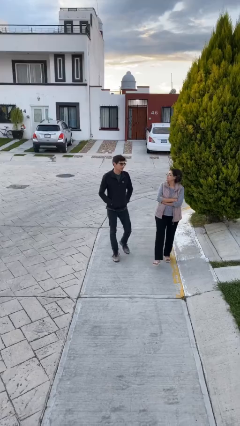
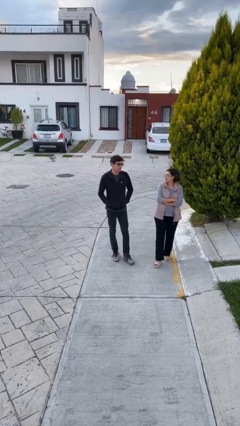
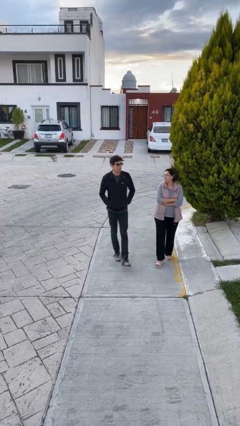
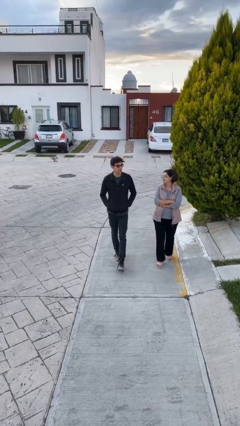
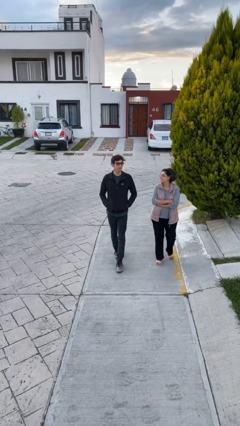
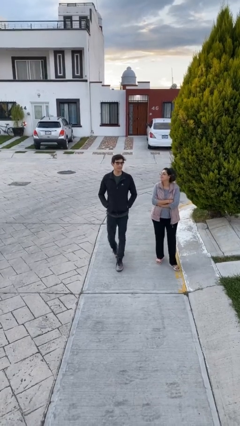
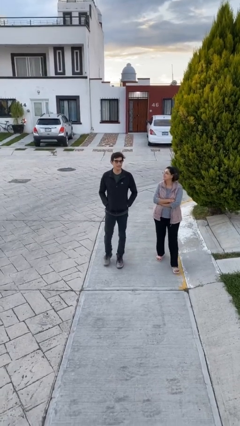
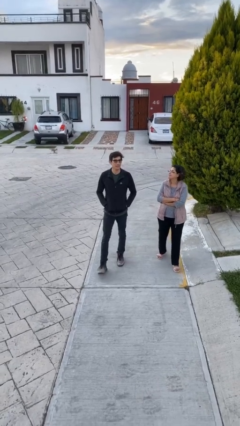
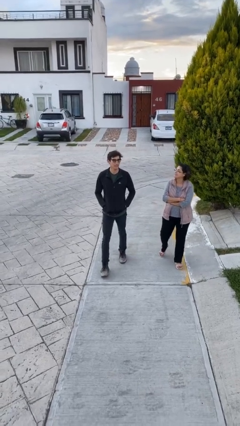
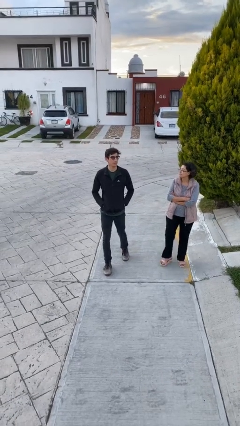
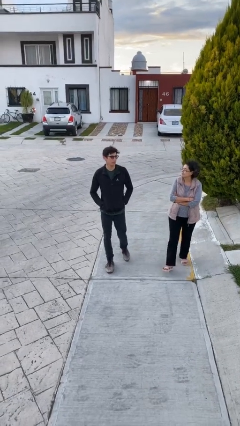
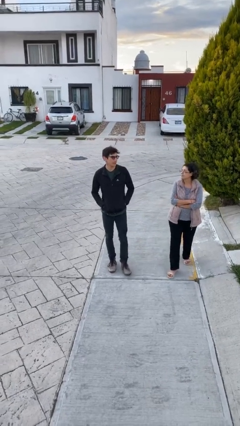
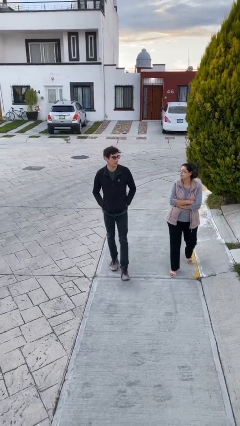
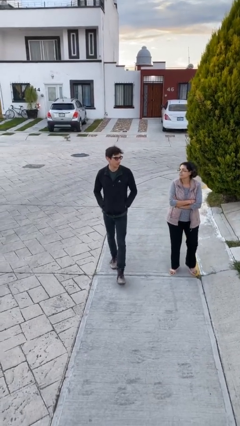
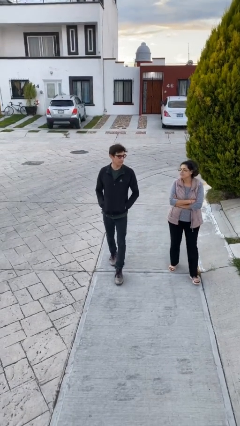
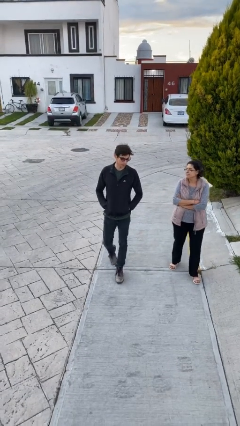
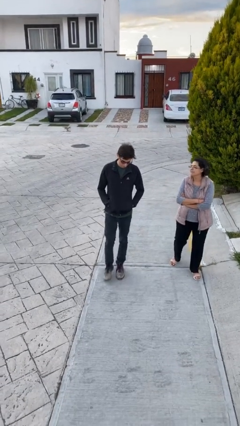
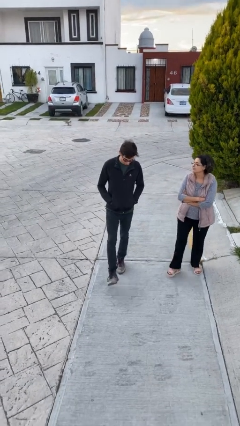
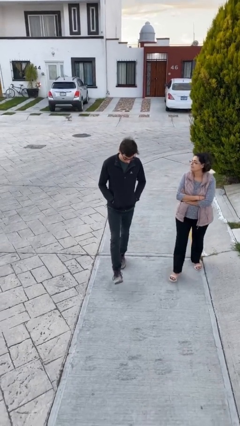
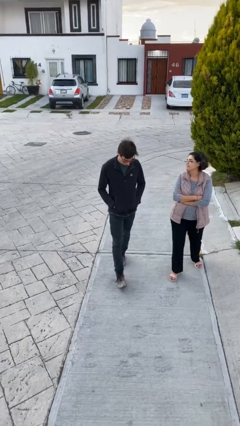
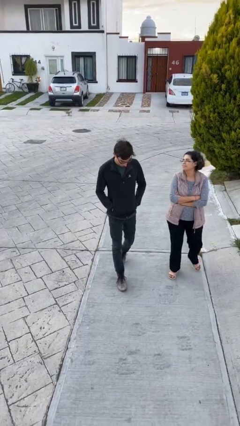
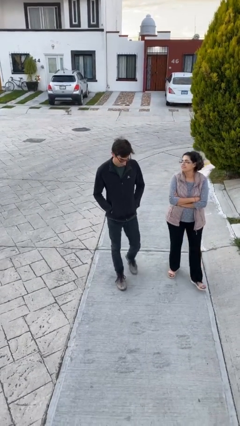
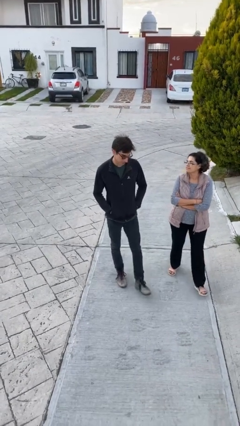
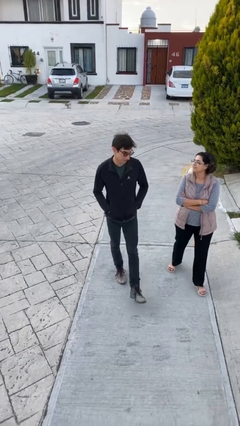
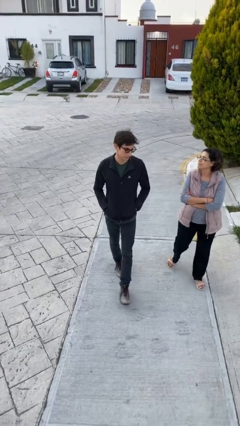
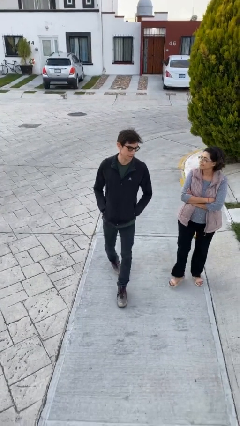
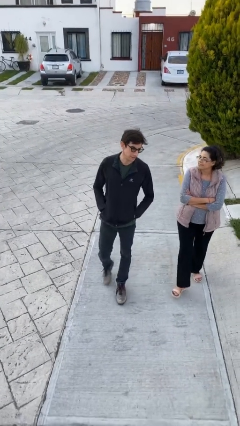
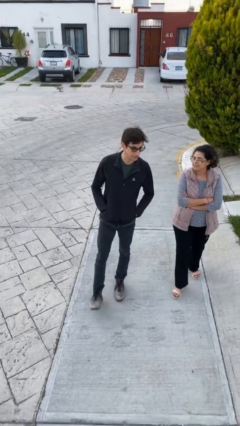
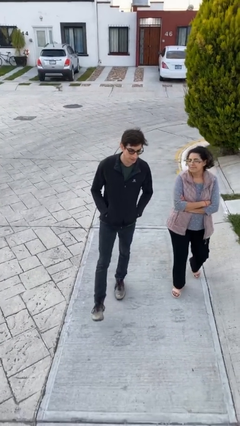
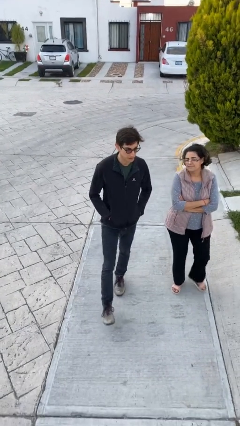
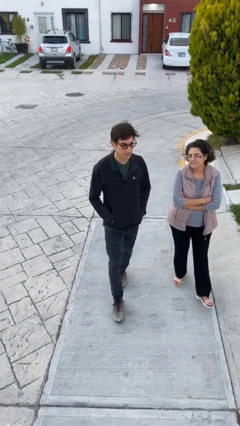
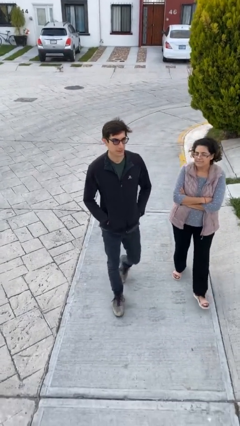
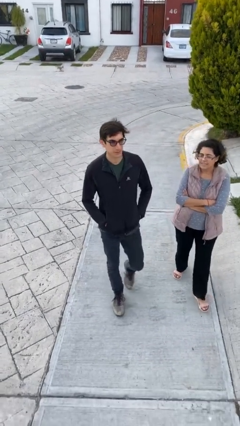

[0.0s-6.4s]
person talks to person

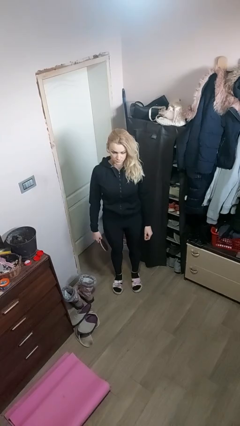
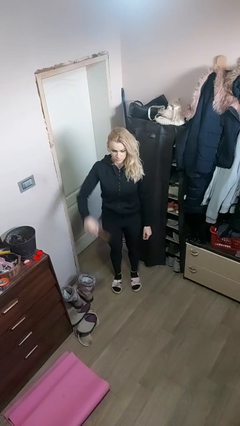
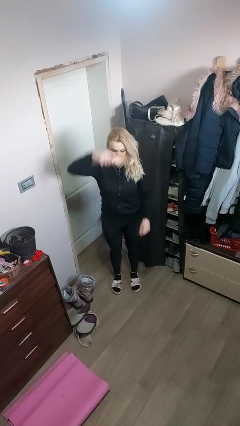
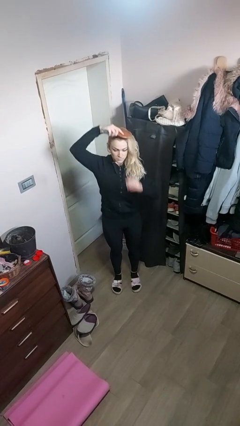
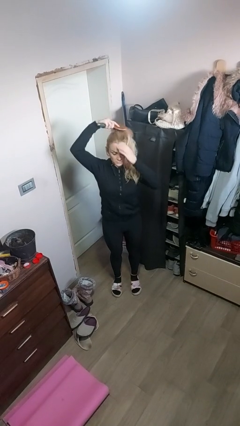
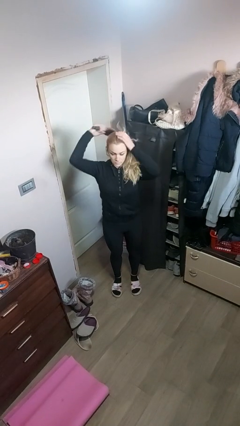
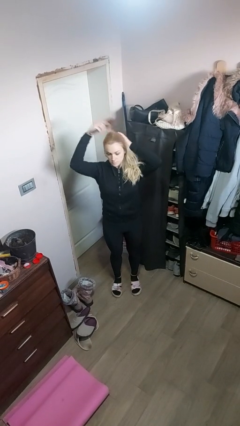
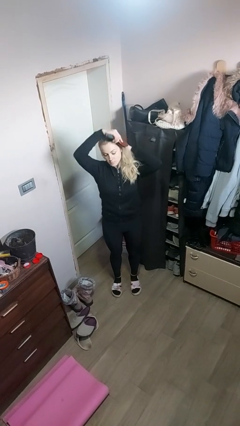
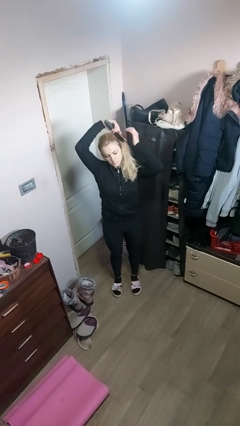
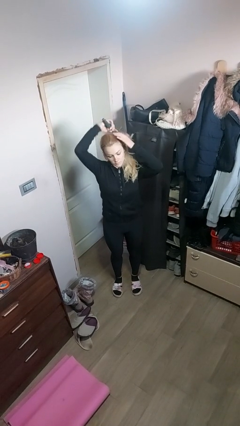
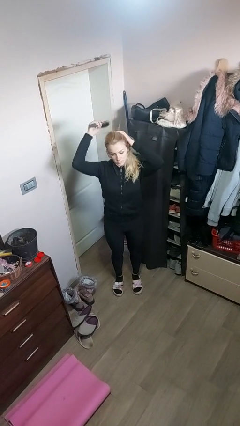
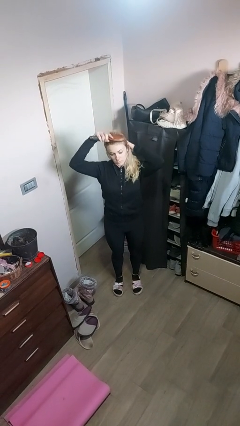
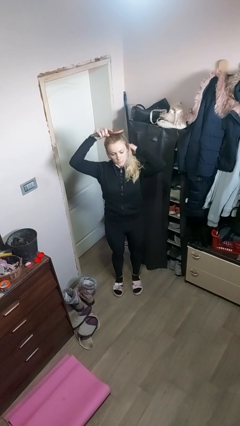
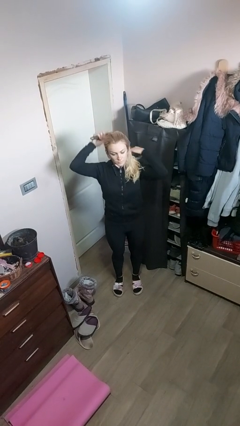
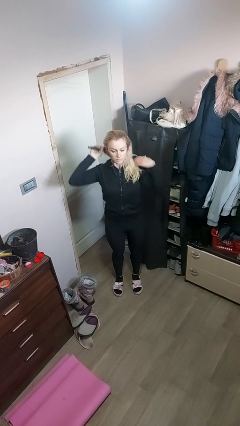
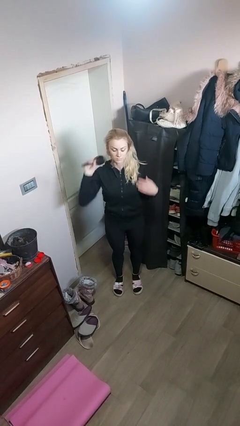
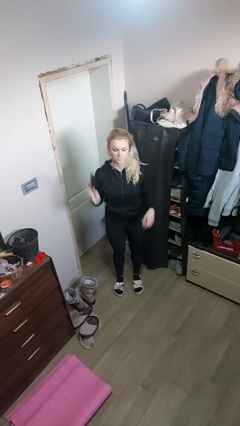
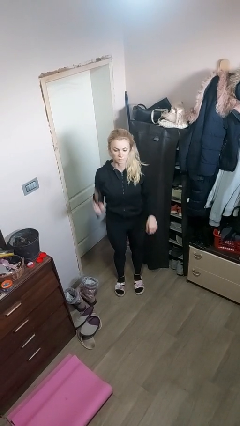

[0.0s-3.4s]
person brushes hair

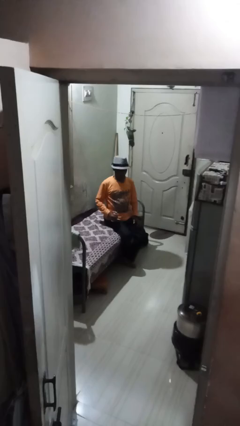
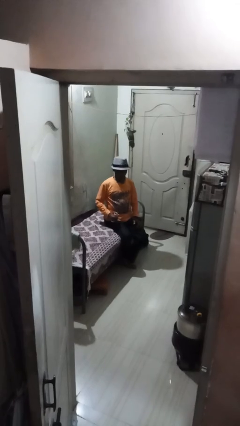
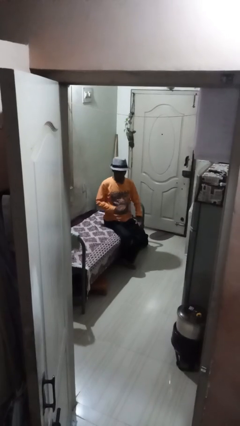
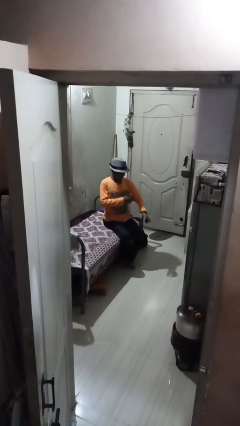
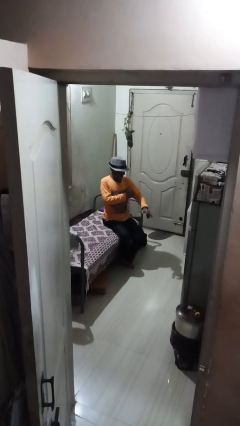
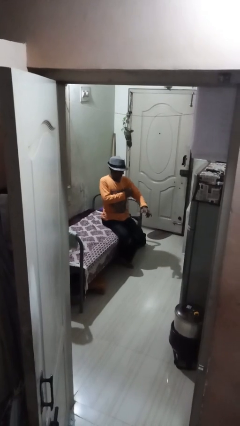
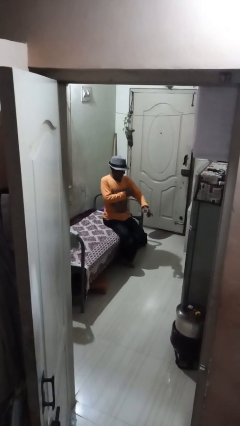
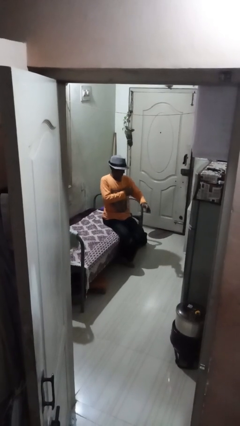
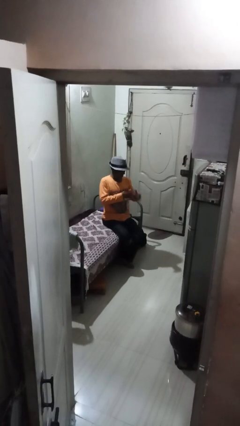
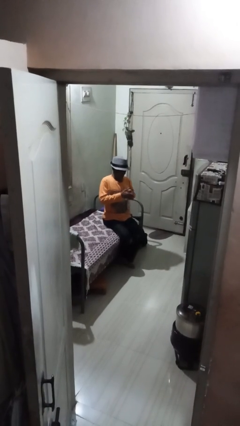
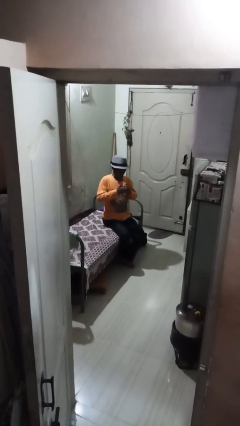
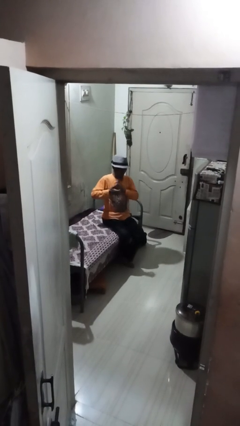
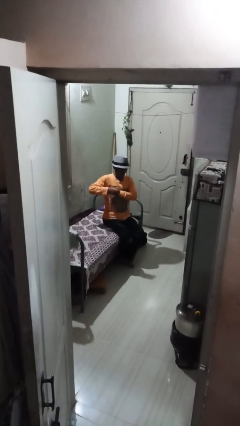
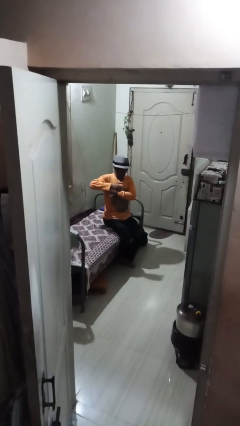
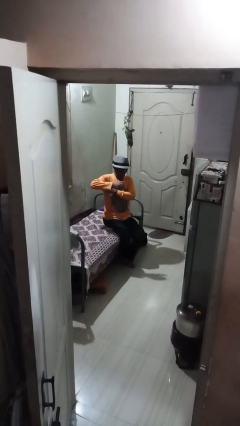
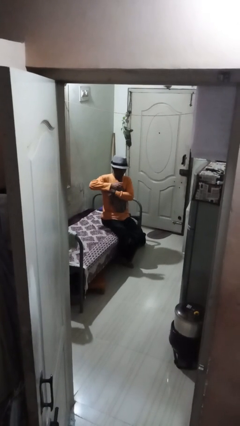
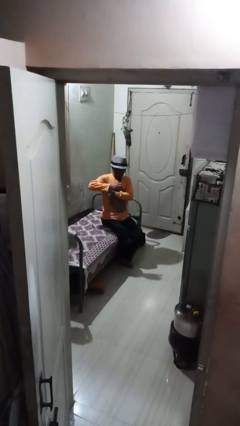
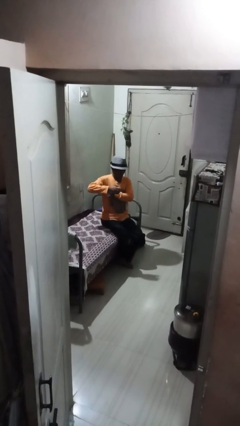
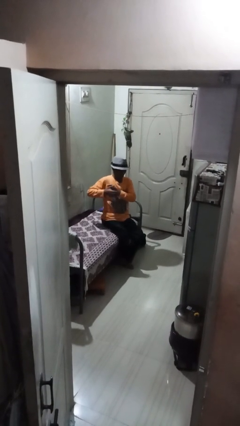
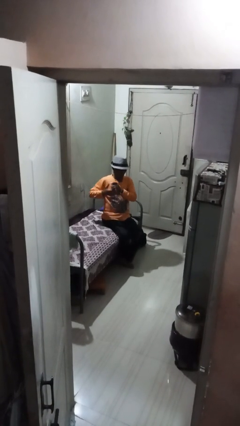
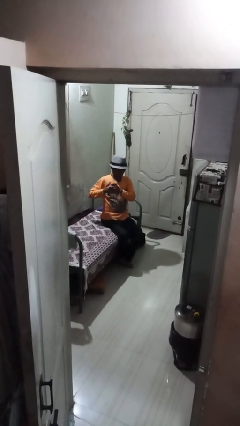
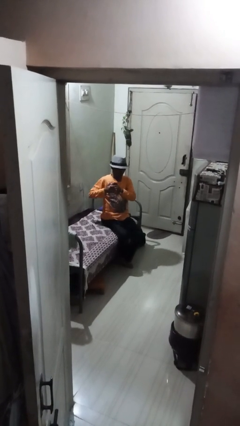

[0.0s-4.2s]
person applies deodorant

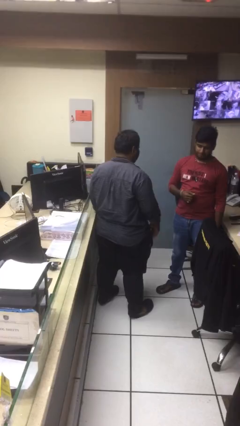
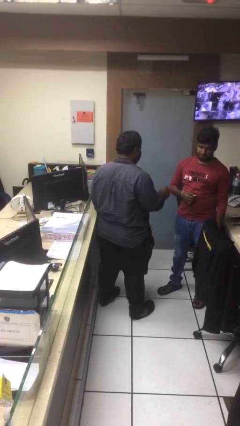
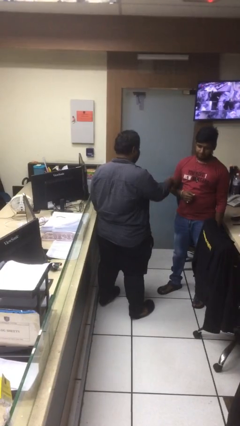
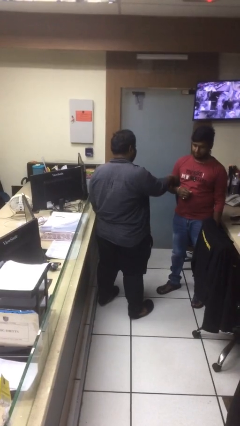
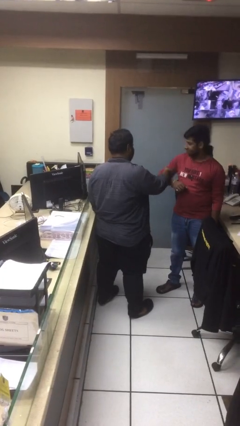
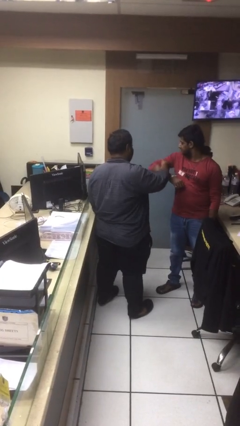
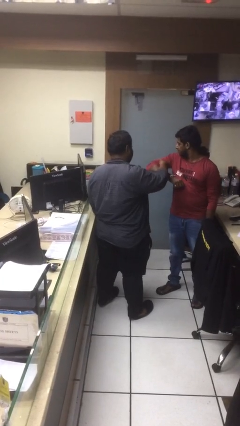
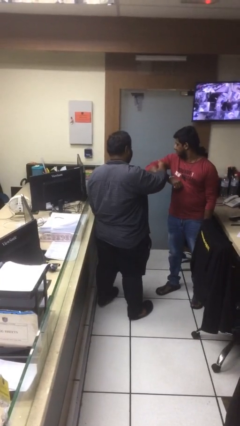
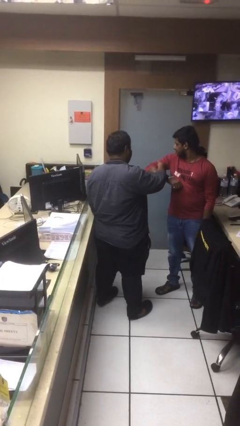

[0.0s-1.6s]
person grabs person by bicep

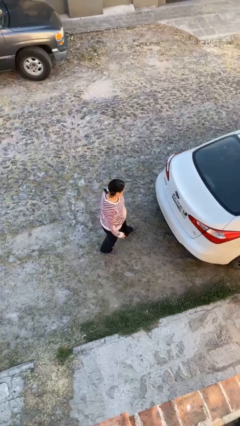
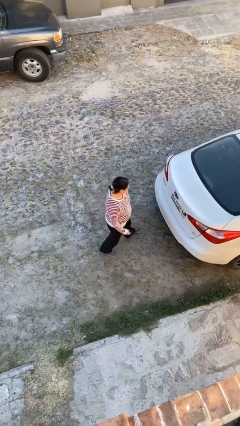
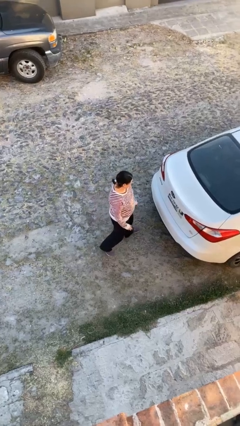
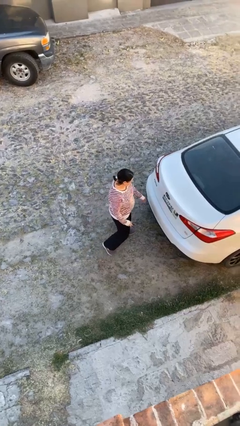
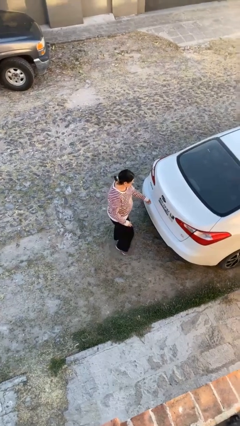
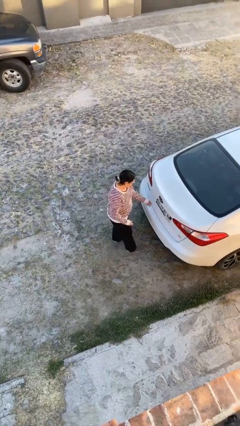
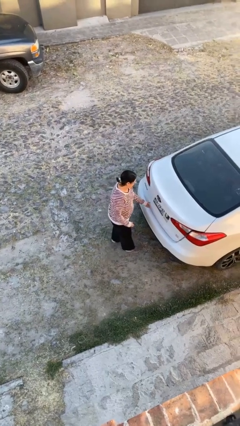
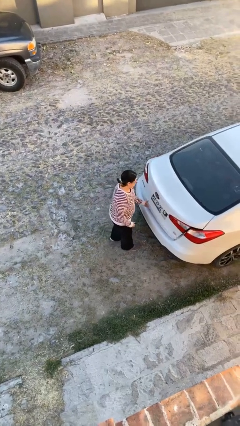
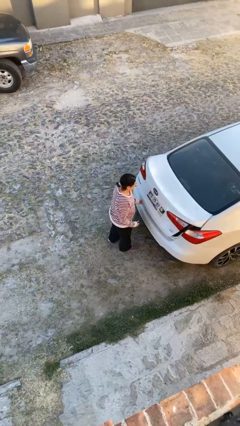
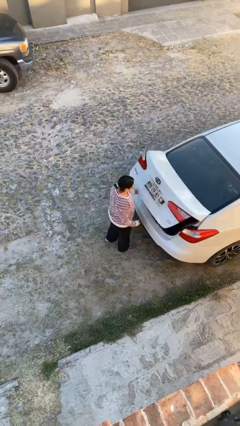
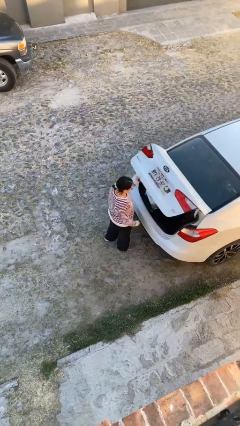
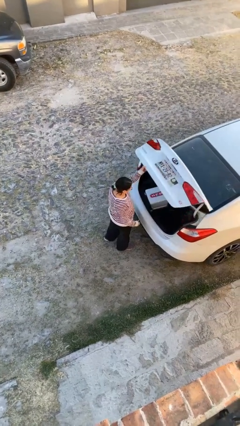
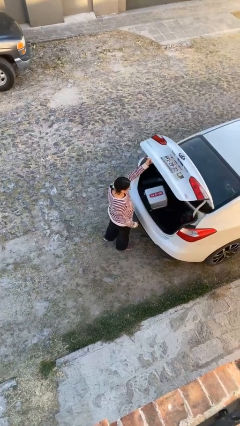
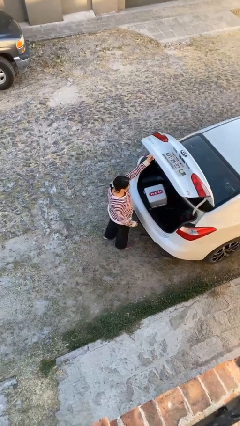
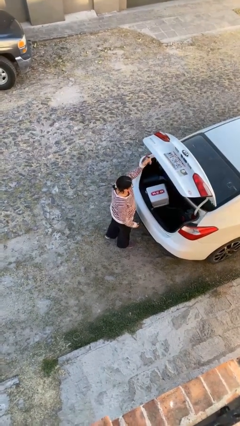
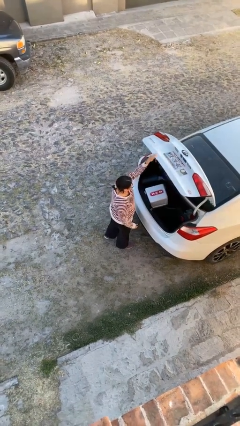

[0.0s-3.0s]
person opens car trunk
